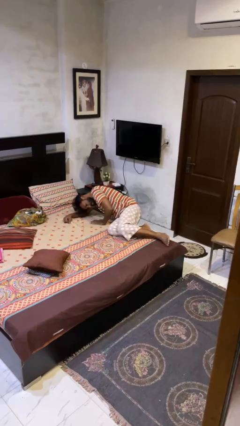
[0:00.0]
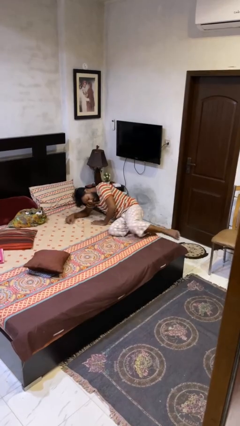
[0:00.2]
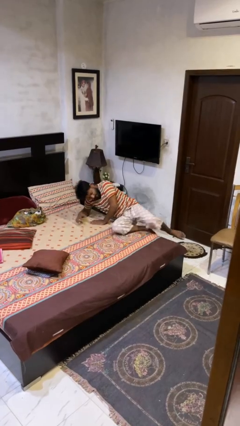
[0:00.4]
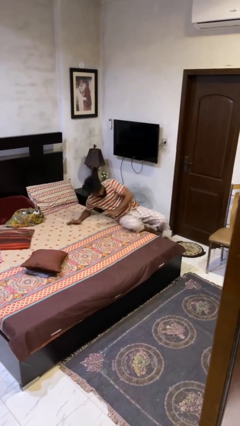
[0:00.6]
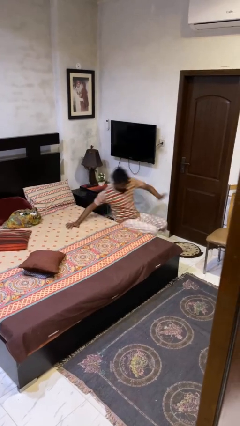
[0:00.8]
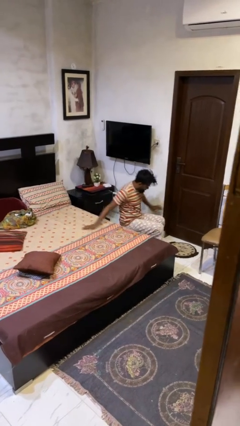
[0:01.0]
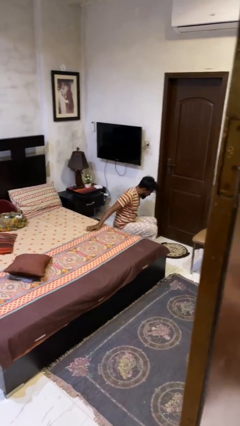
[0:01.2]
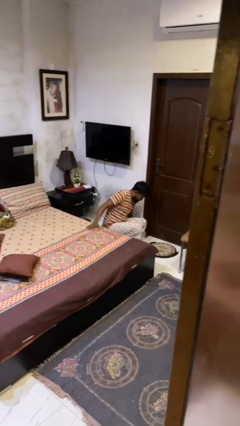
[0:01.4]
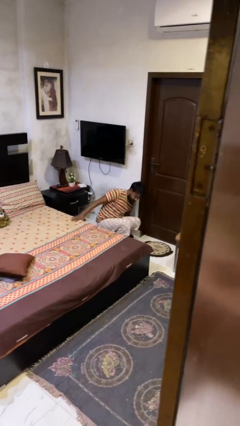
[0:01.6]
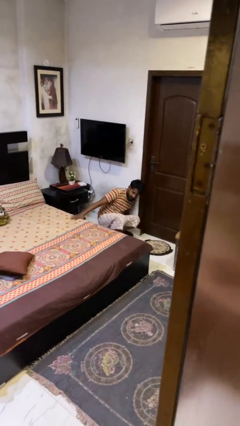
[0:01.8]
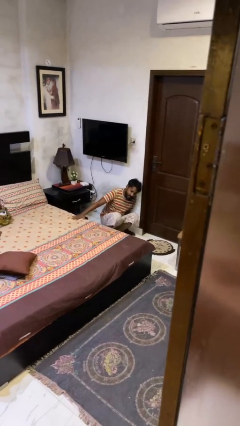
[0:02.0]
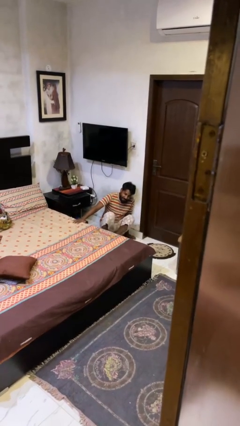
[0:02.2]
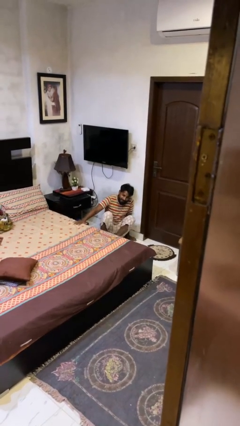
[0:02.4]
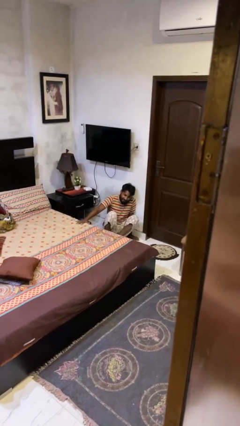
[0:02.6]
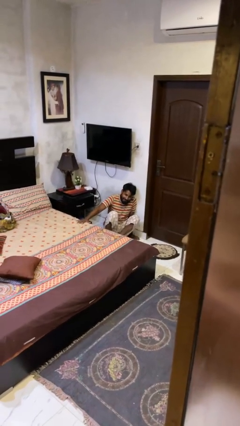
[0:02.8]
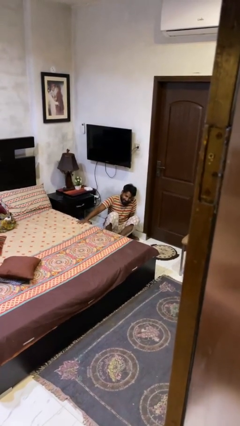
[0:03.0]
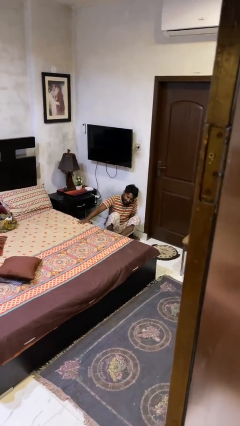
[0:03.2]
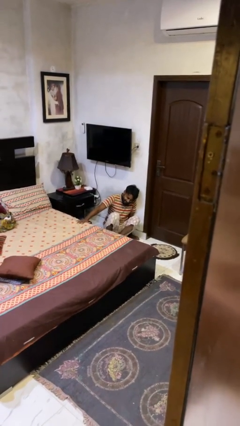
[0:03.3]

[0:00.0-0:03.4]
person falls from bed

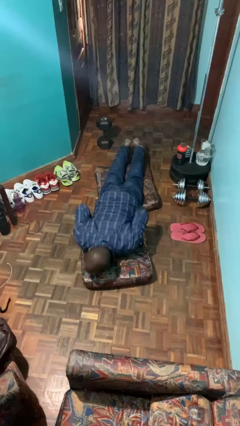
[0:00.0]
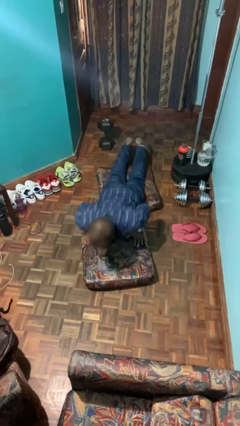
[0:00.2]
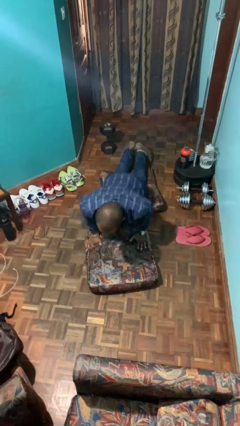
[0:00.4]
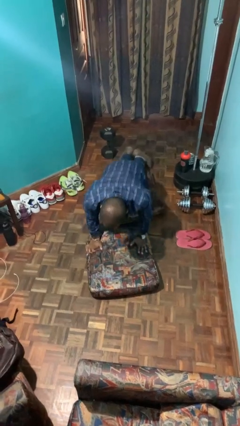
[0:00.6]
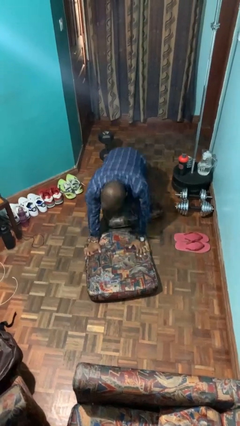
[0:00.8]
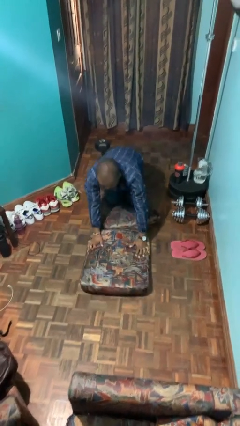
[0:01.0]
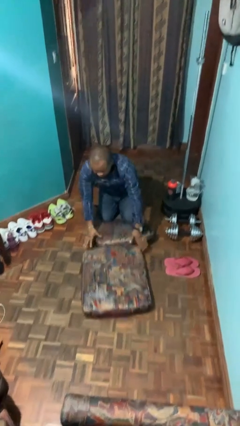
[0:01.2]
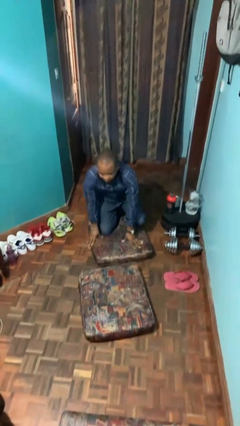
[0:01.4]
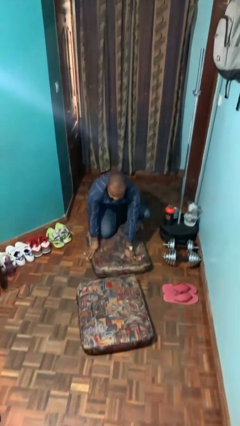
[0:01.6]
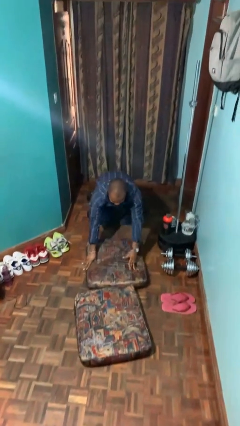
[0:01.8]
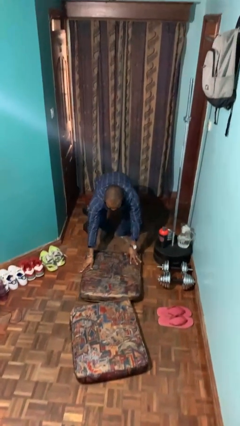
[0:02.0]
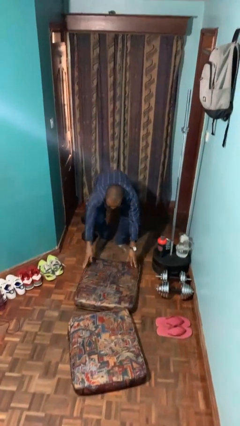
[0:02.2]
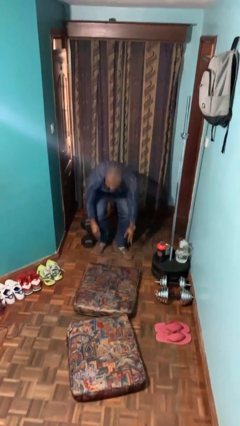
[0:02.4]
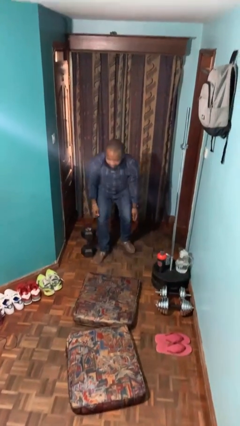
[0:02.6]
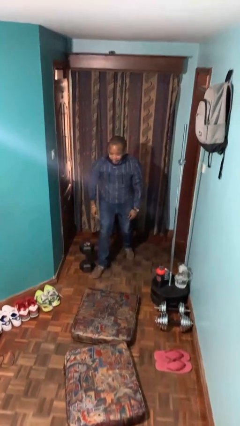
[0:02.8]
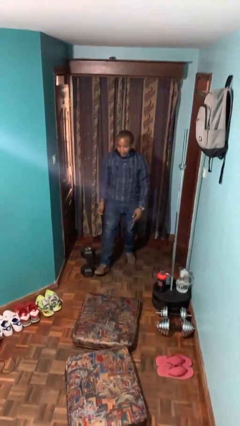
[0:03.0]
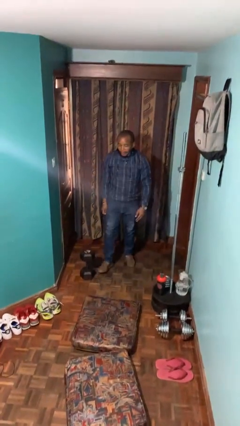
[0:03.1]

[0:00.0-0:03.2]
person stands up from floor

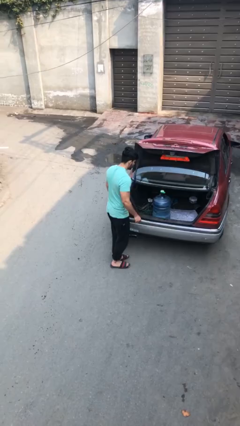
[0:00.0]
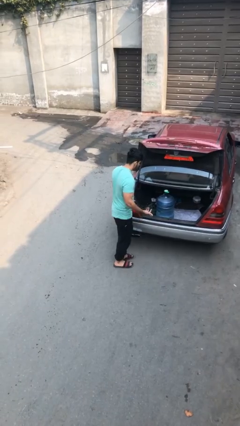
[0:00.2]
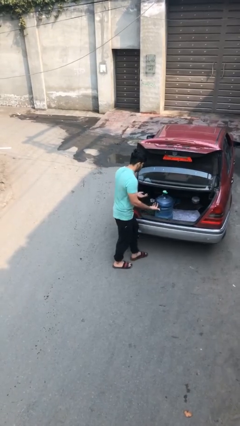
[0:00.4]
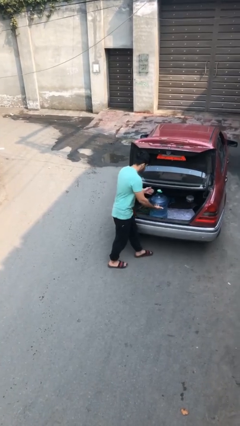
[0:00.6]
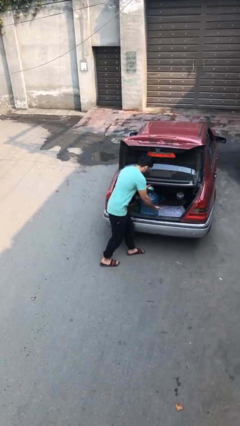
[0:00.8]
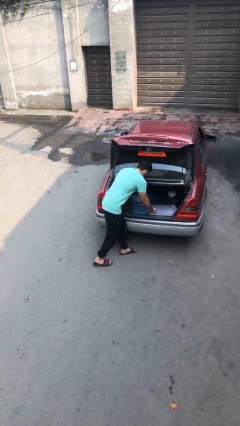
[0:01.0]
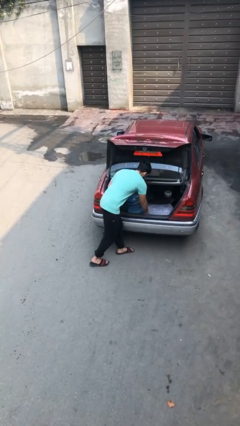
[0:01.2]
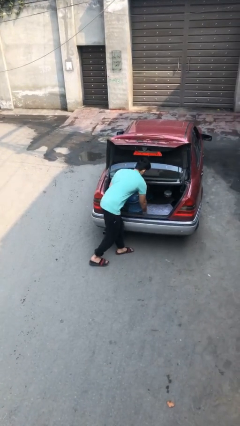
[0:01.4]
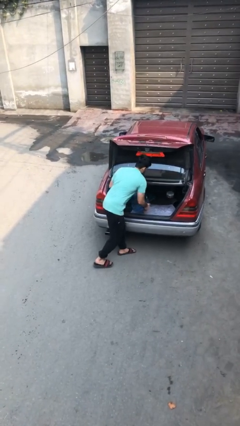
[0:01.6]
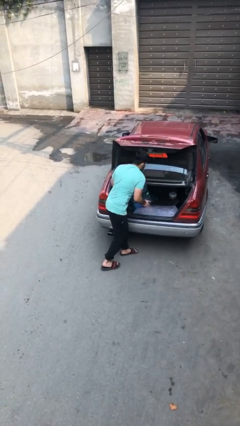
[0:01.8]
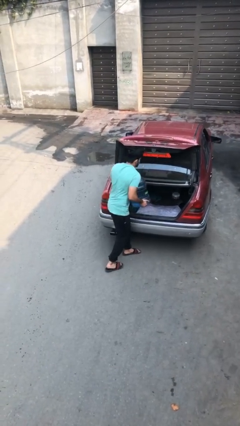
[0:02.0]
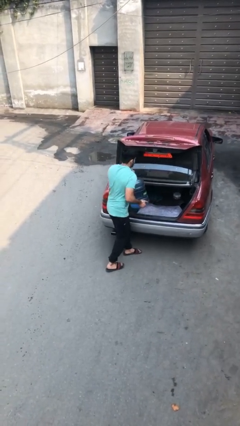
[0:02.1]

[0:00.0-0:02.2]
person unloads car

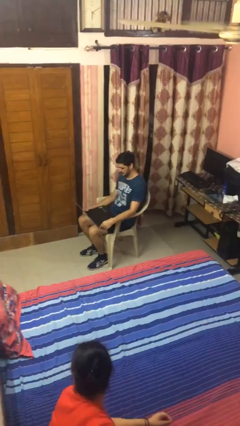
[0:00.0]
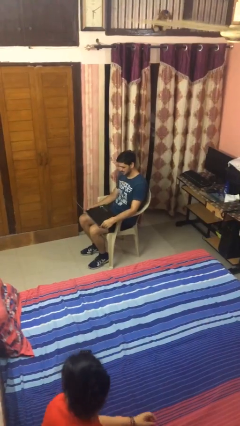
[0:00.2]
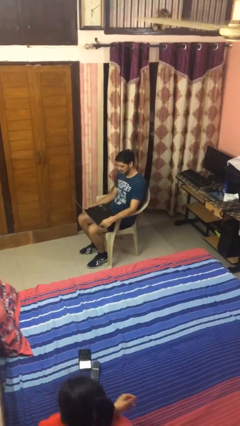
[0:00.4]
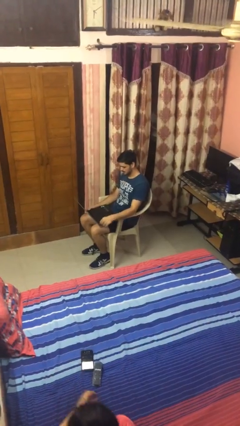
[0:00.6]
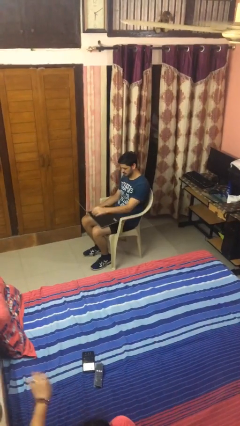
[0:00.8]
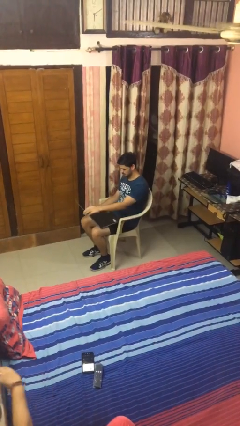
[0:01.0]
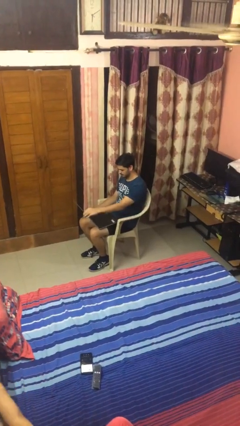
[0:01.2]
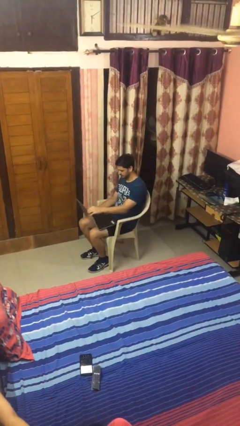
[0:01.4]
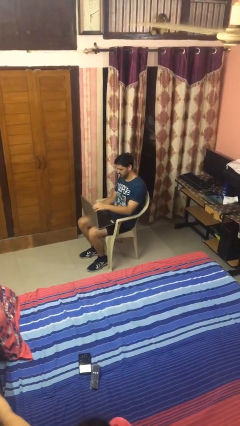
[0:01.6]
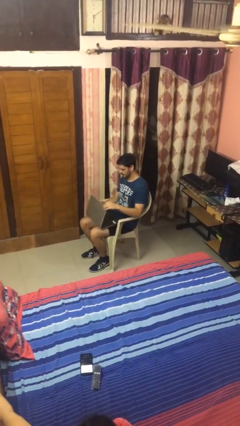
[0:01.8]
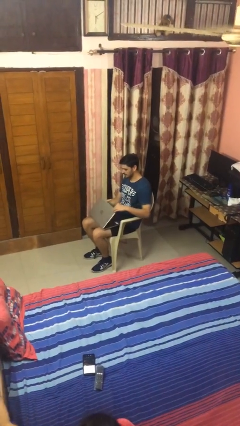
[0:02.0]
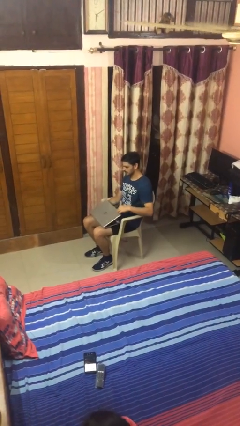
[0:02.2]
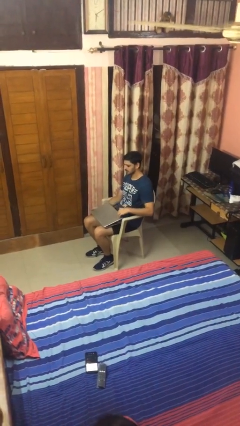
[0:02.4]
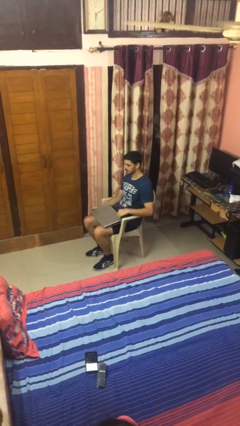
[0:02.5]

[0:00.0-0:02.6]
person closes laptop

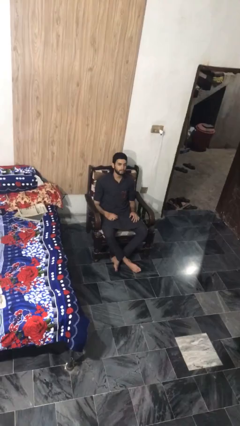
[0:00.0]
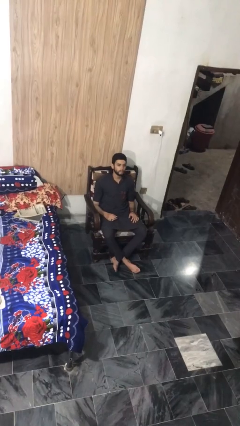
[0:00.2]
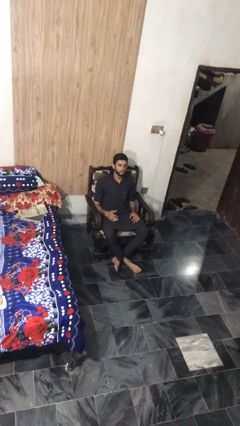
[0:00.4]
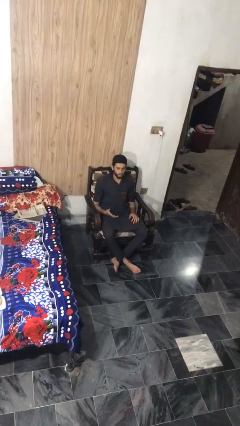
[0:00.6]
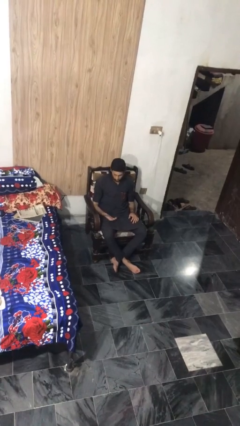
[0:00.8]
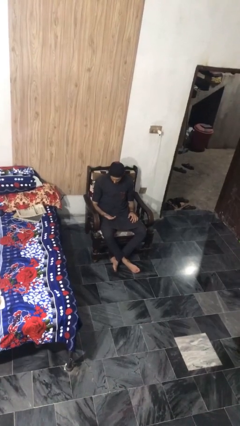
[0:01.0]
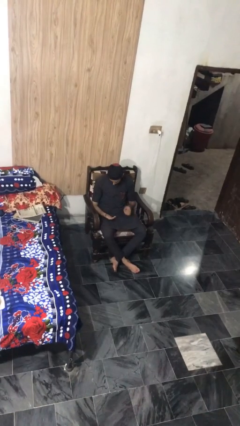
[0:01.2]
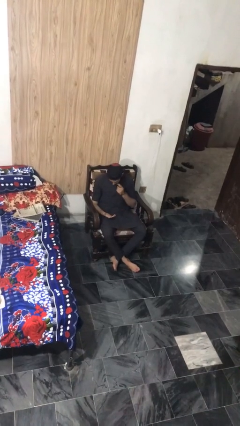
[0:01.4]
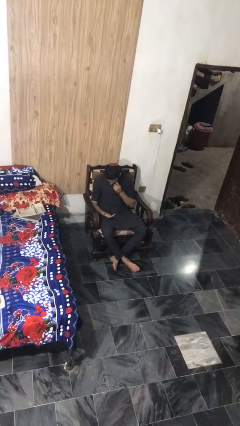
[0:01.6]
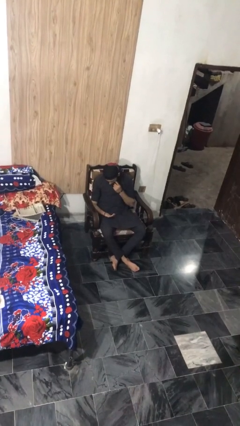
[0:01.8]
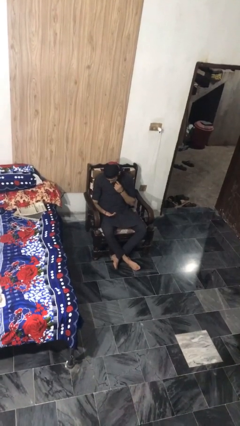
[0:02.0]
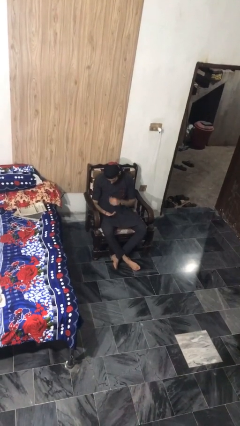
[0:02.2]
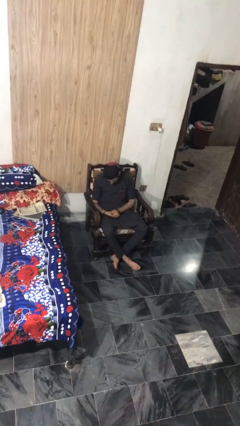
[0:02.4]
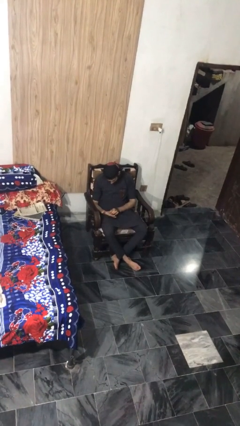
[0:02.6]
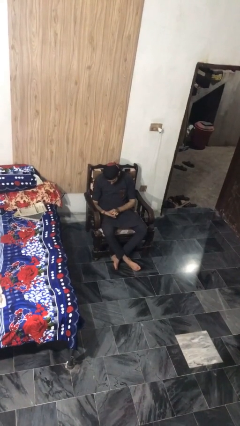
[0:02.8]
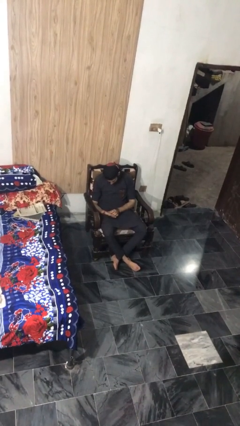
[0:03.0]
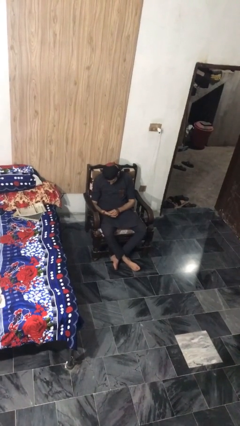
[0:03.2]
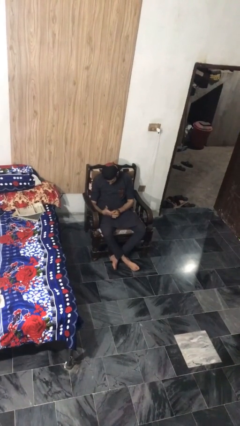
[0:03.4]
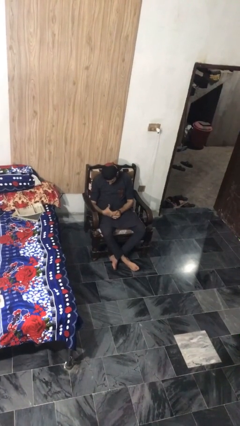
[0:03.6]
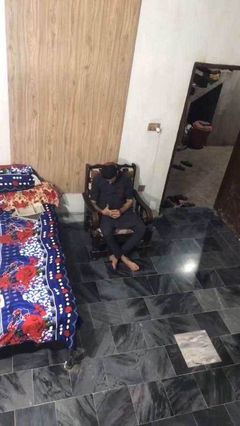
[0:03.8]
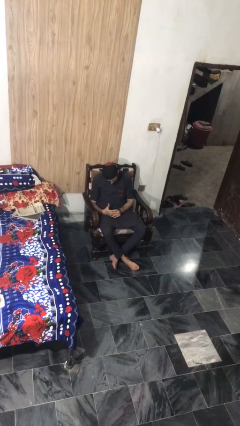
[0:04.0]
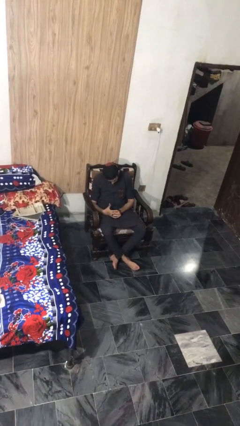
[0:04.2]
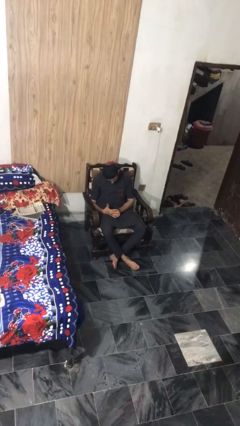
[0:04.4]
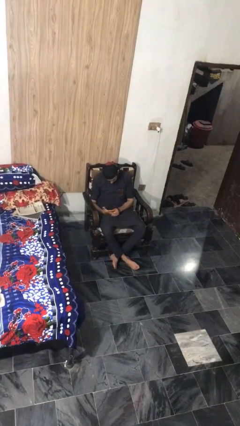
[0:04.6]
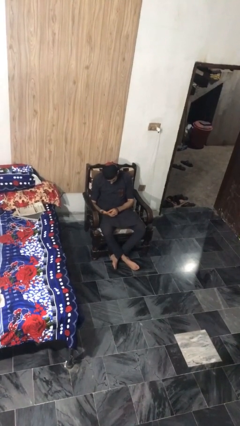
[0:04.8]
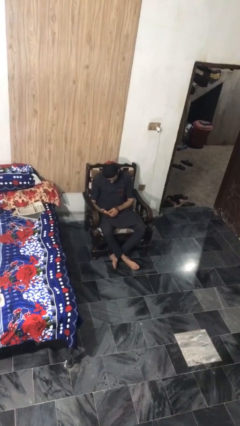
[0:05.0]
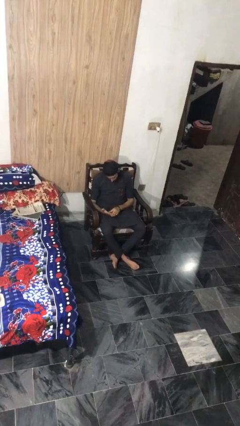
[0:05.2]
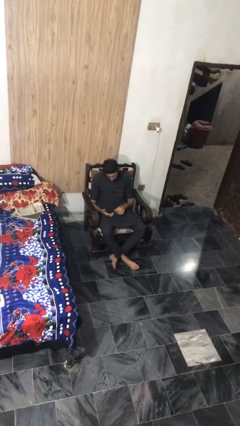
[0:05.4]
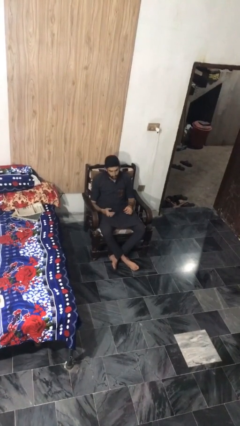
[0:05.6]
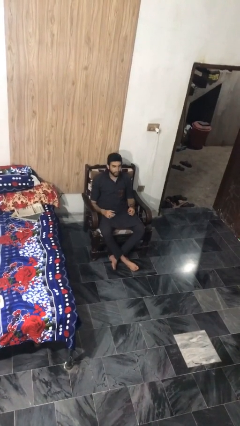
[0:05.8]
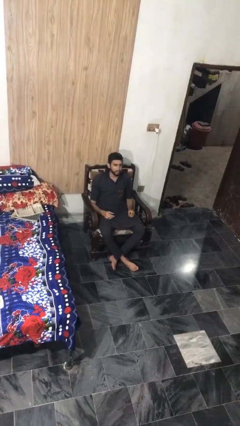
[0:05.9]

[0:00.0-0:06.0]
person looks at hands in lap

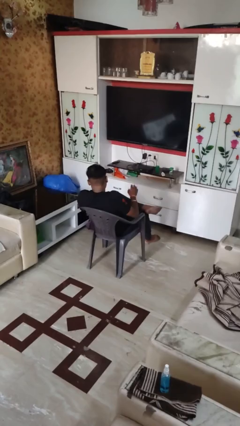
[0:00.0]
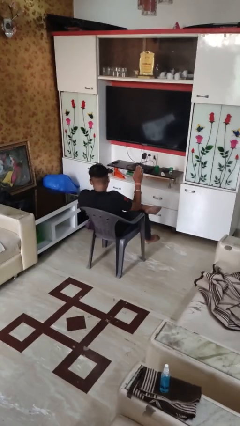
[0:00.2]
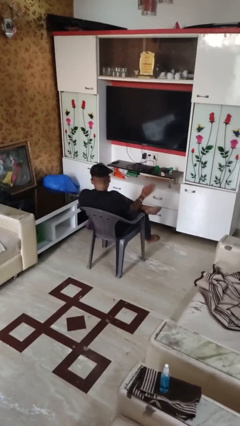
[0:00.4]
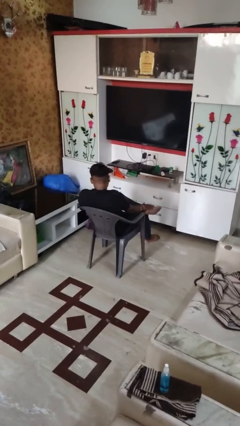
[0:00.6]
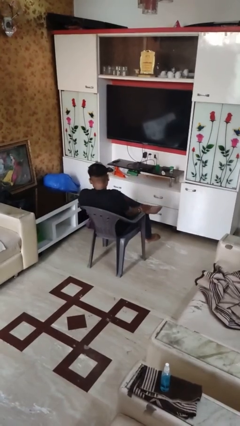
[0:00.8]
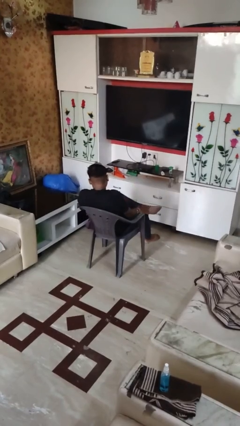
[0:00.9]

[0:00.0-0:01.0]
person swats bug
